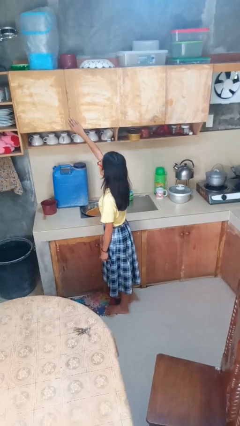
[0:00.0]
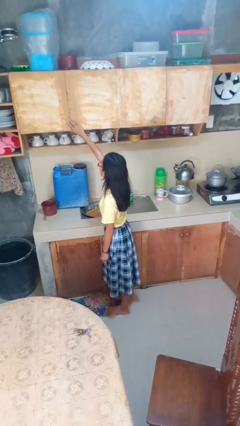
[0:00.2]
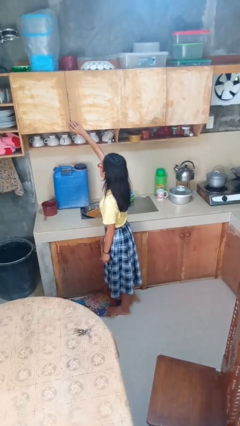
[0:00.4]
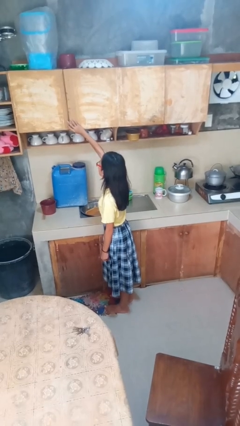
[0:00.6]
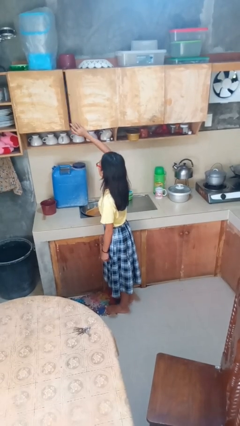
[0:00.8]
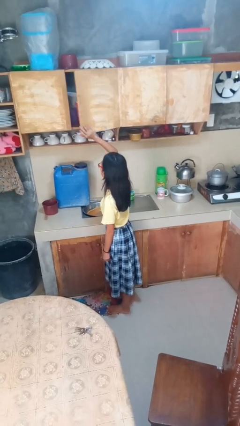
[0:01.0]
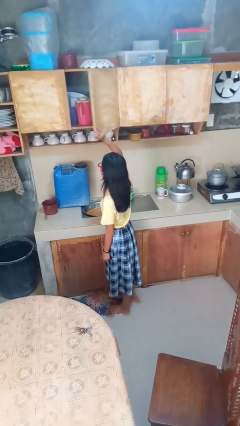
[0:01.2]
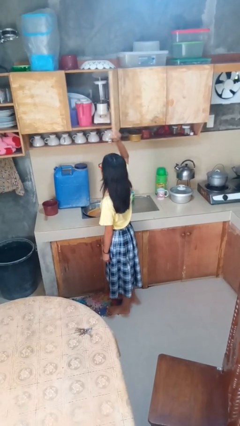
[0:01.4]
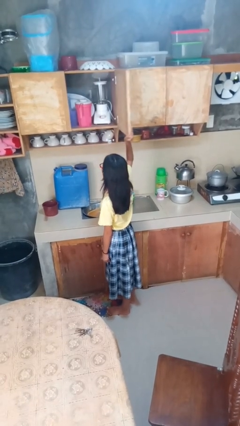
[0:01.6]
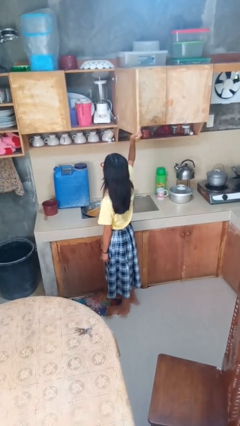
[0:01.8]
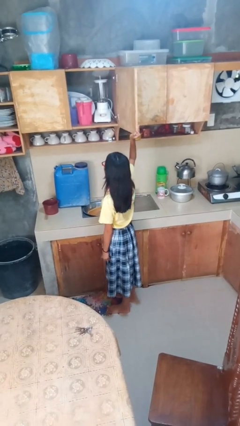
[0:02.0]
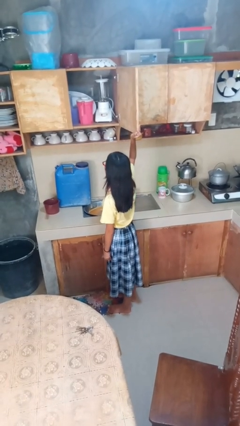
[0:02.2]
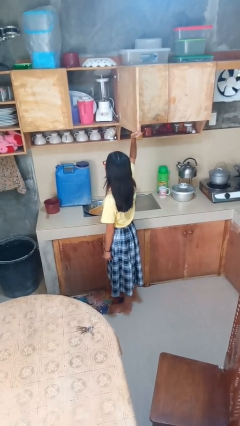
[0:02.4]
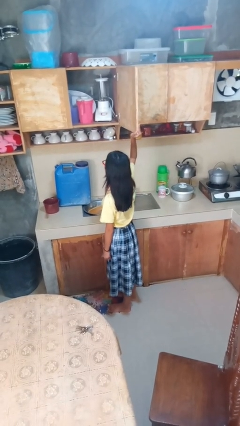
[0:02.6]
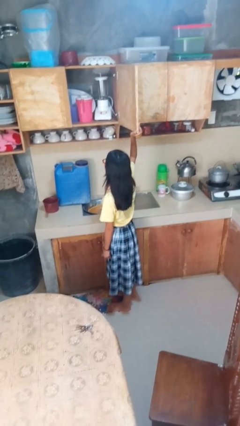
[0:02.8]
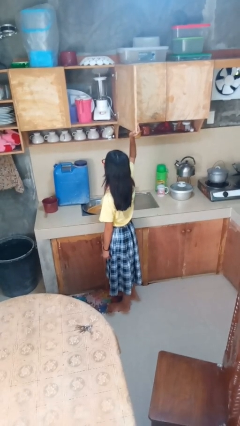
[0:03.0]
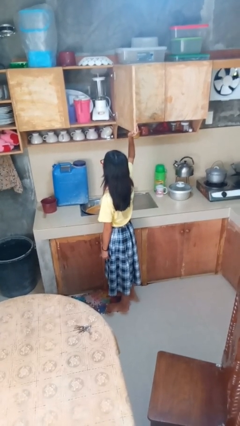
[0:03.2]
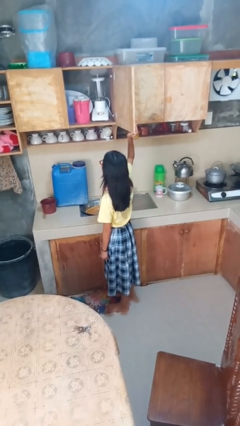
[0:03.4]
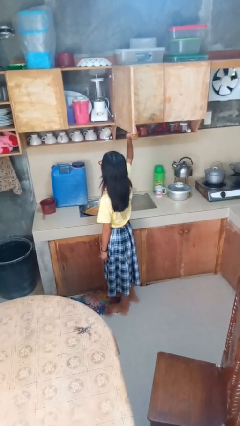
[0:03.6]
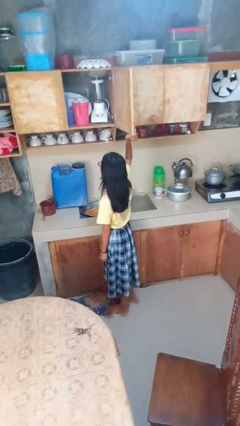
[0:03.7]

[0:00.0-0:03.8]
person opens cabinet

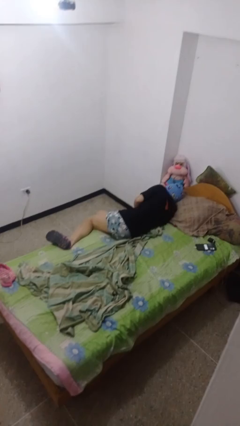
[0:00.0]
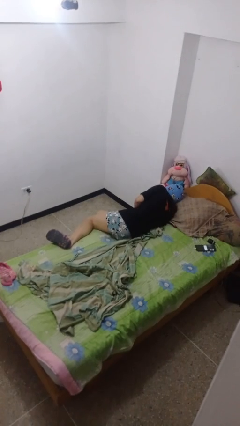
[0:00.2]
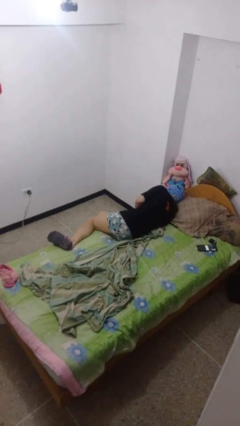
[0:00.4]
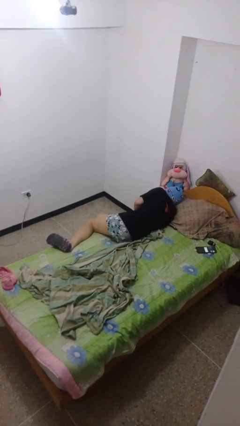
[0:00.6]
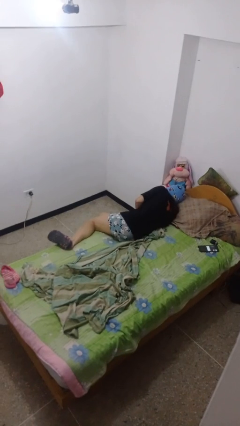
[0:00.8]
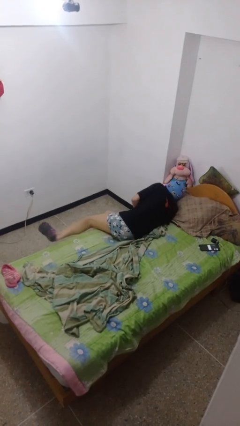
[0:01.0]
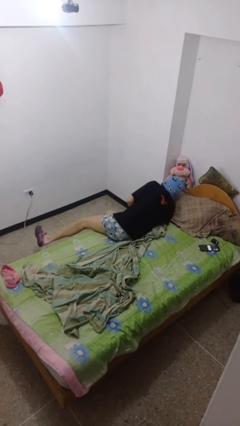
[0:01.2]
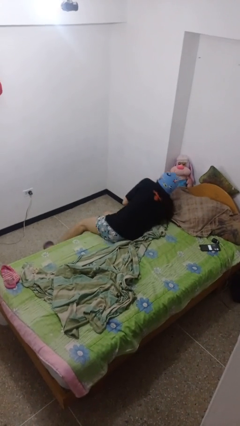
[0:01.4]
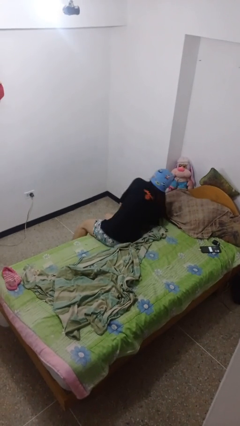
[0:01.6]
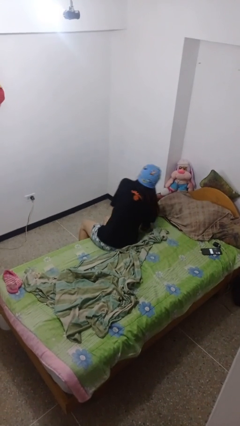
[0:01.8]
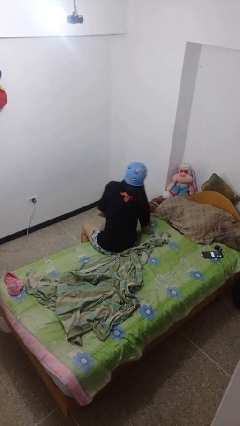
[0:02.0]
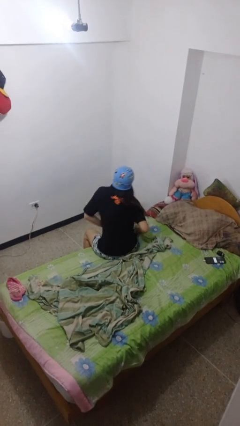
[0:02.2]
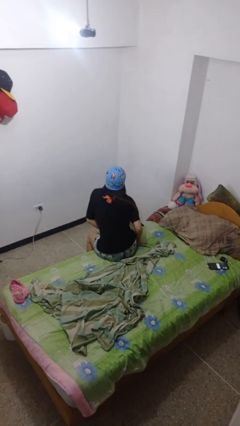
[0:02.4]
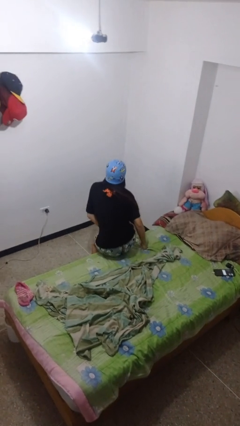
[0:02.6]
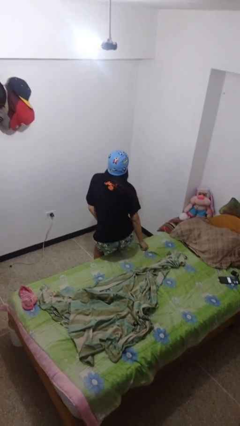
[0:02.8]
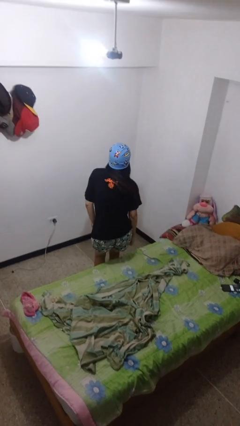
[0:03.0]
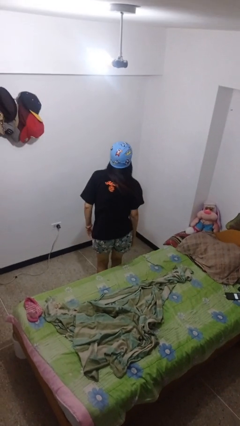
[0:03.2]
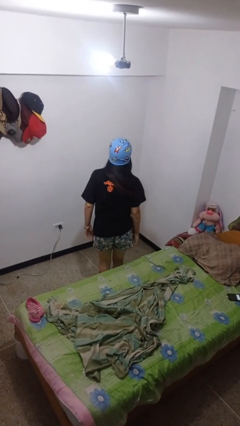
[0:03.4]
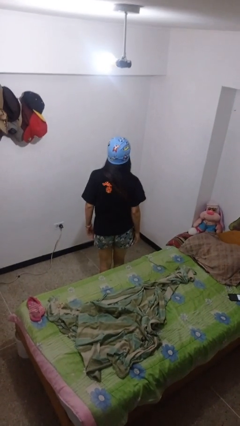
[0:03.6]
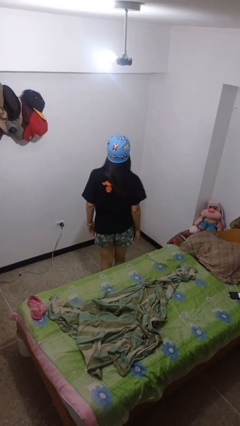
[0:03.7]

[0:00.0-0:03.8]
person stands up

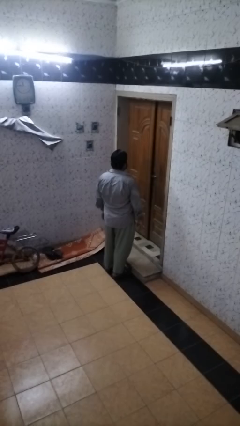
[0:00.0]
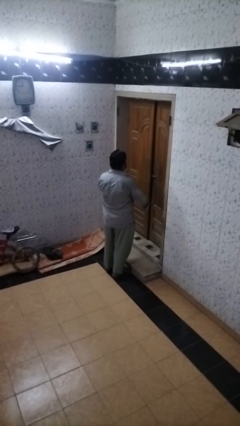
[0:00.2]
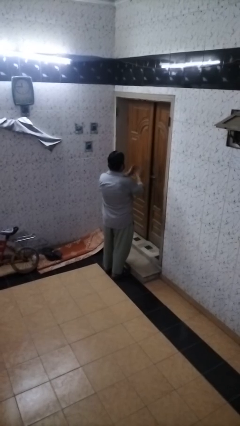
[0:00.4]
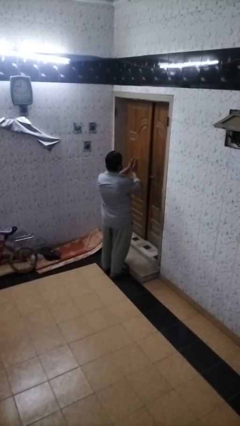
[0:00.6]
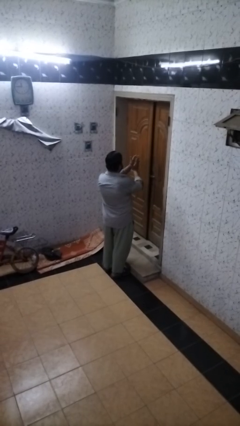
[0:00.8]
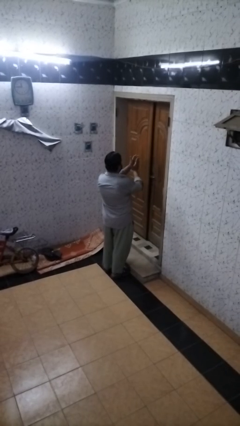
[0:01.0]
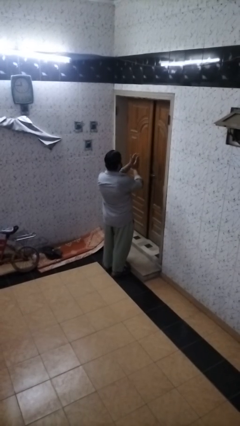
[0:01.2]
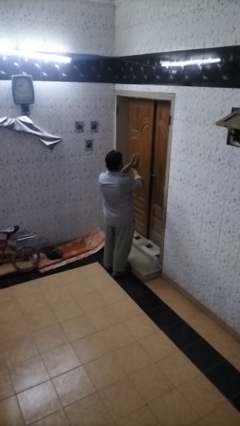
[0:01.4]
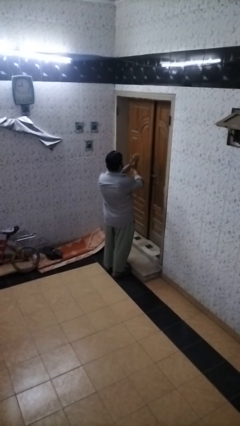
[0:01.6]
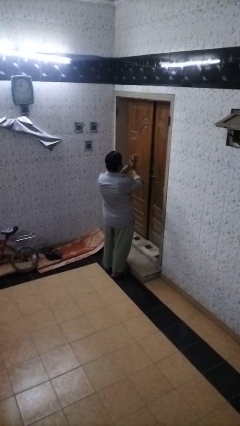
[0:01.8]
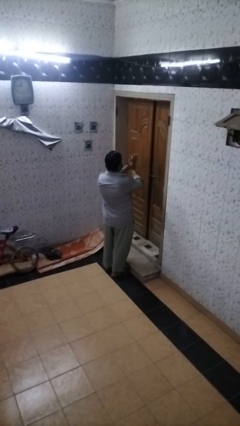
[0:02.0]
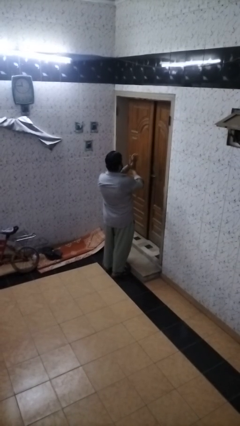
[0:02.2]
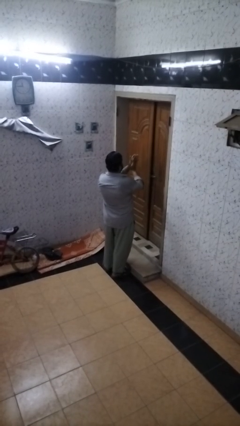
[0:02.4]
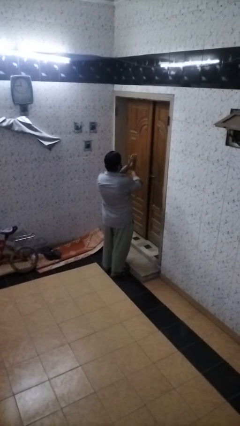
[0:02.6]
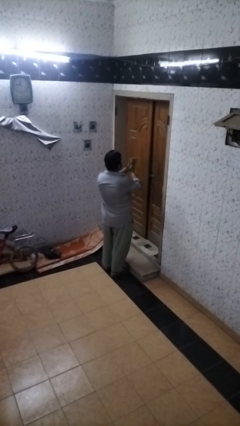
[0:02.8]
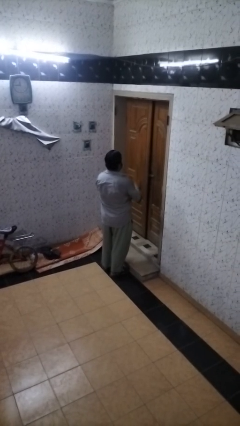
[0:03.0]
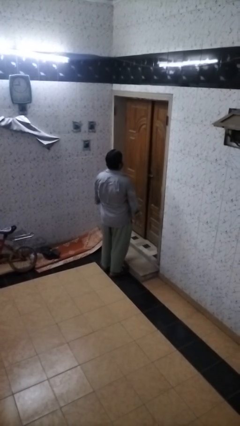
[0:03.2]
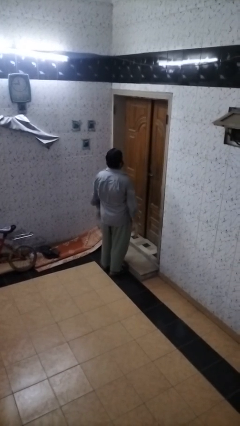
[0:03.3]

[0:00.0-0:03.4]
person claps hands

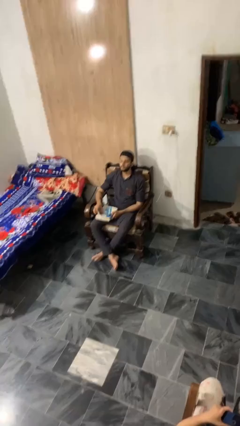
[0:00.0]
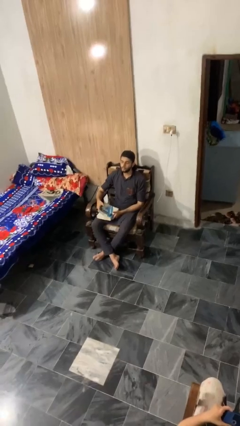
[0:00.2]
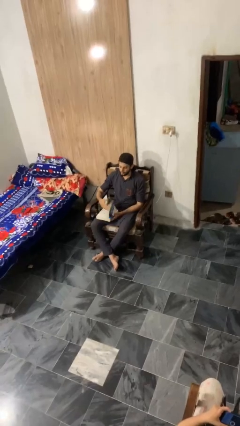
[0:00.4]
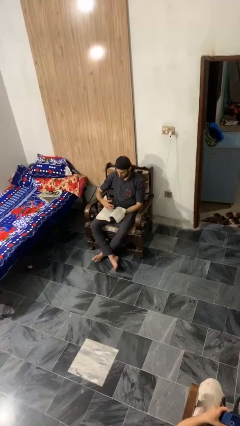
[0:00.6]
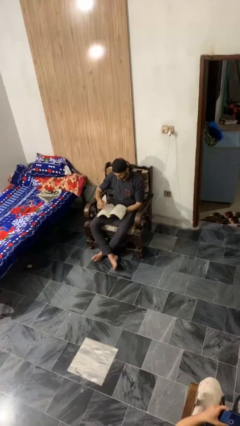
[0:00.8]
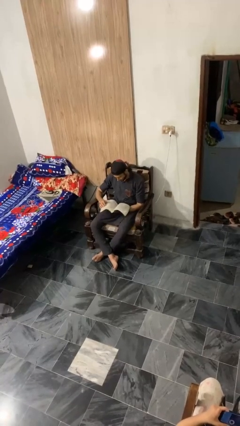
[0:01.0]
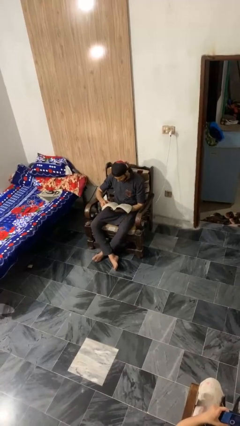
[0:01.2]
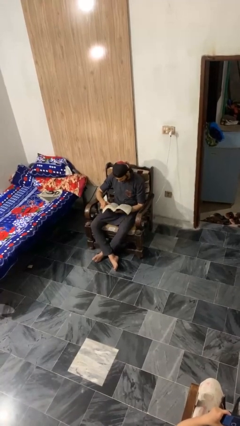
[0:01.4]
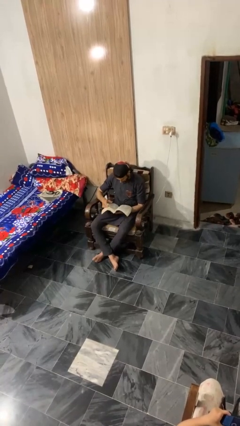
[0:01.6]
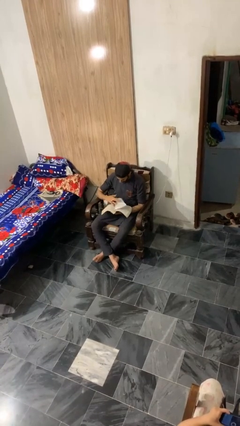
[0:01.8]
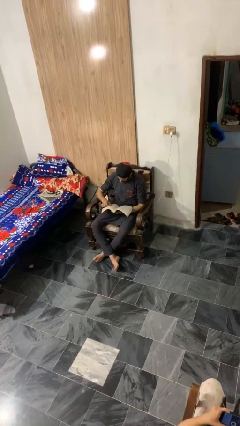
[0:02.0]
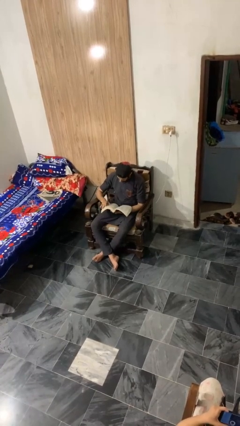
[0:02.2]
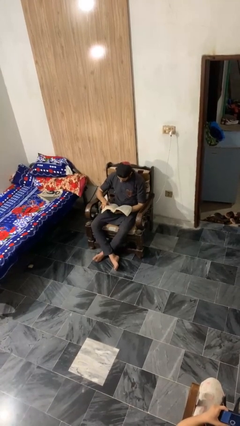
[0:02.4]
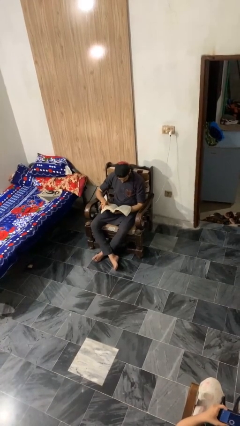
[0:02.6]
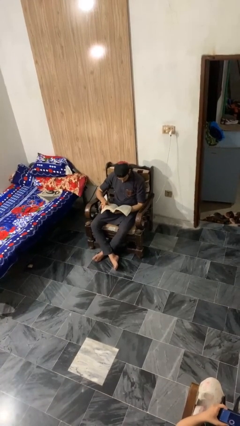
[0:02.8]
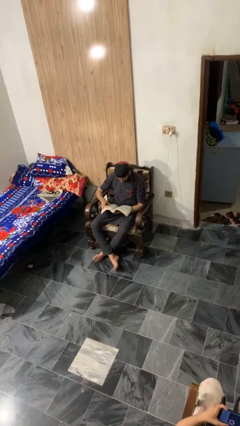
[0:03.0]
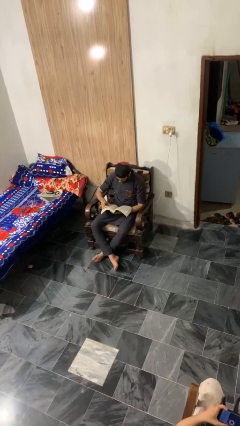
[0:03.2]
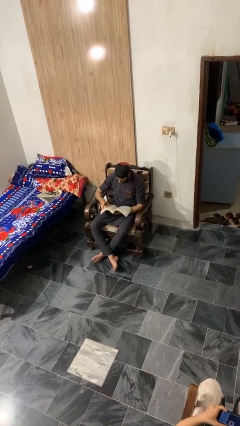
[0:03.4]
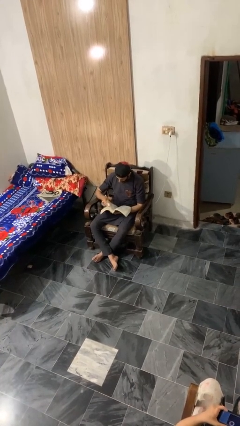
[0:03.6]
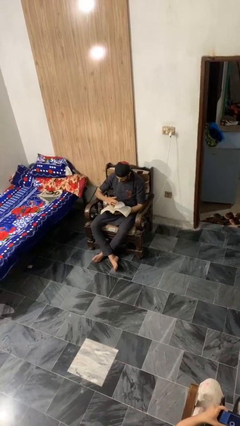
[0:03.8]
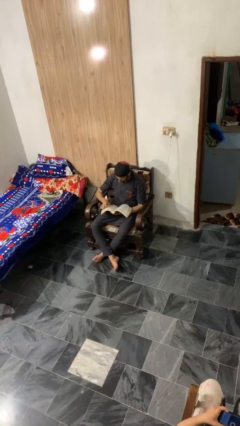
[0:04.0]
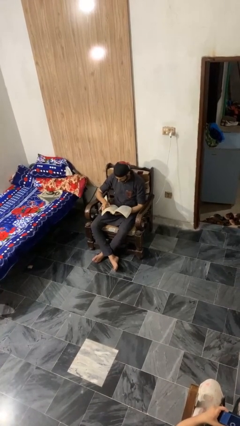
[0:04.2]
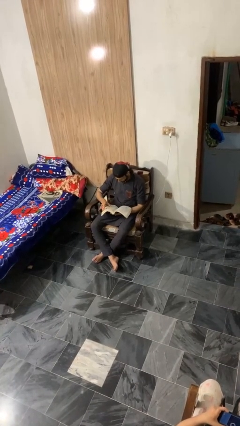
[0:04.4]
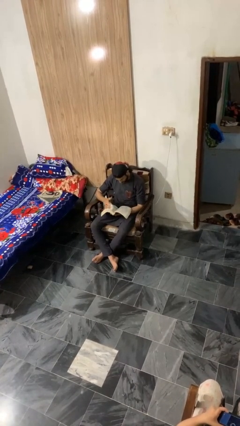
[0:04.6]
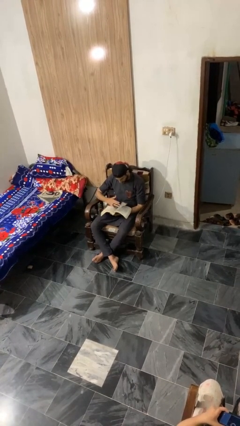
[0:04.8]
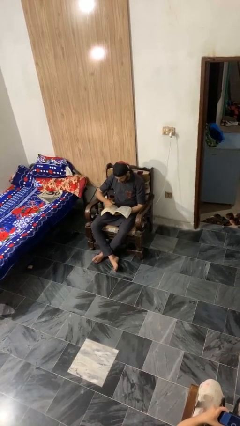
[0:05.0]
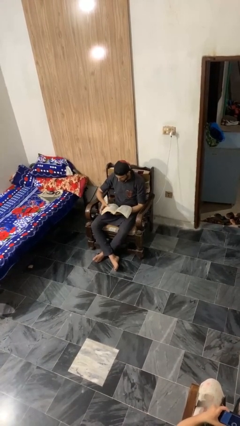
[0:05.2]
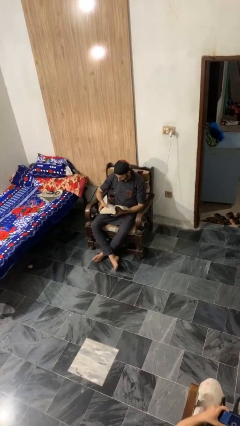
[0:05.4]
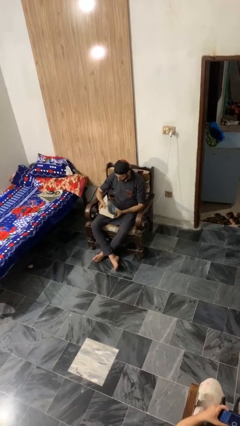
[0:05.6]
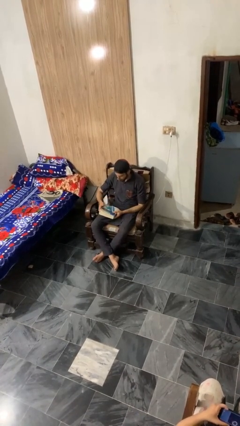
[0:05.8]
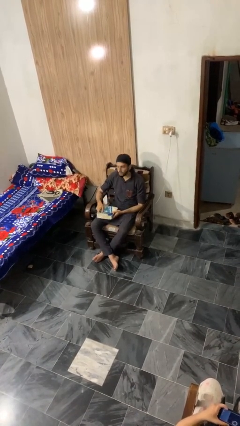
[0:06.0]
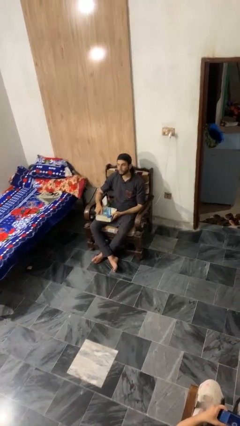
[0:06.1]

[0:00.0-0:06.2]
person reads book

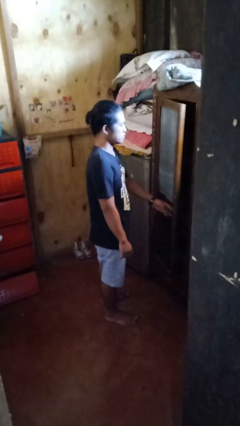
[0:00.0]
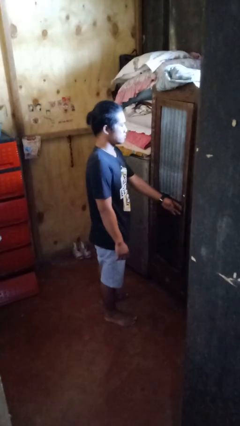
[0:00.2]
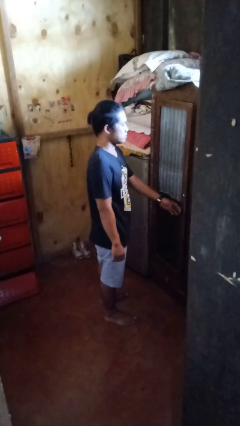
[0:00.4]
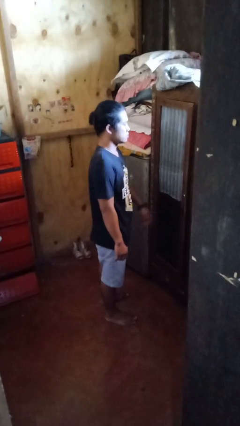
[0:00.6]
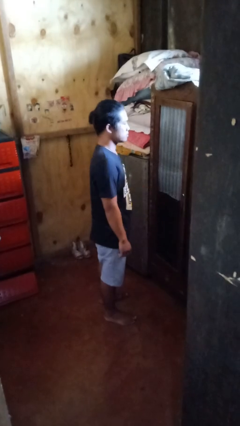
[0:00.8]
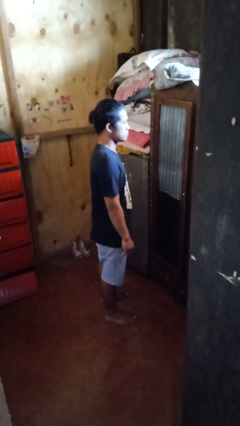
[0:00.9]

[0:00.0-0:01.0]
person closes closet door
